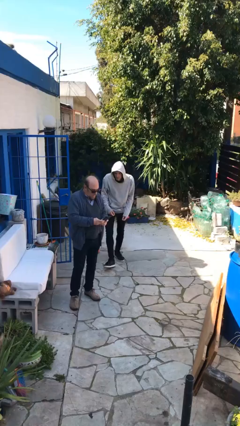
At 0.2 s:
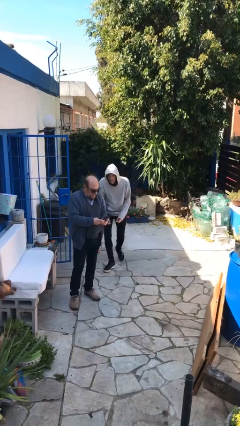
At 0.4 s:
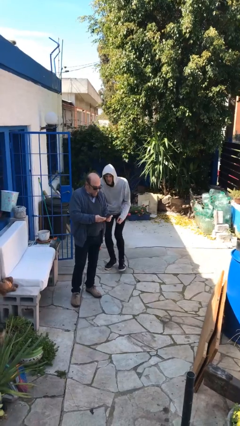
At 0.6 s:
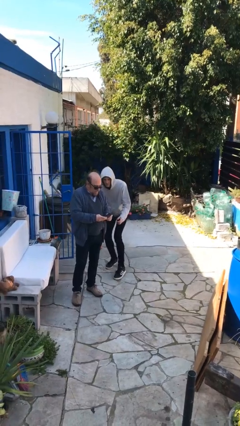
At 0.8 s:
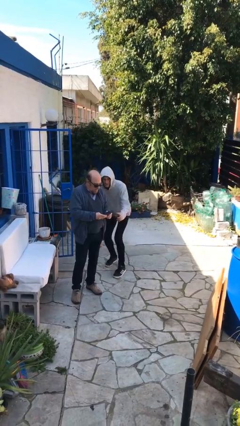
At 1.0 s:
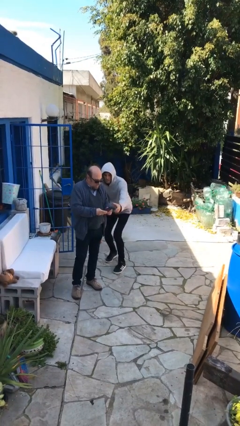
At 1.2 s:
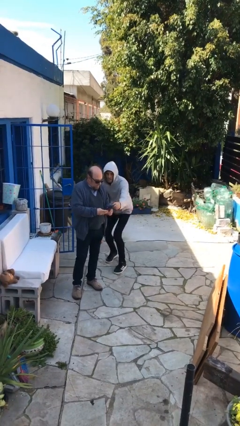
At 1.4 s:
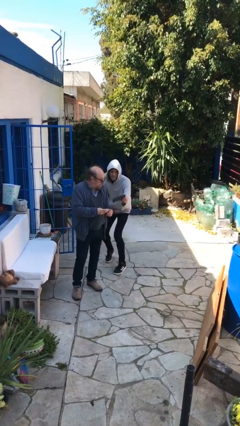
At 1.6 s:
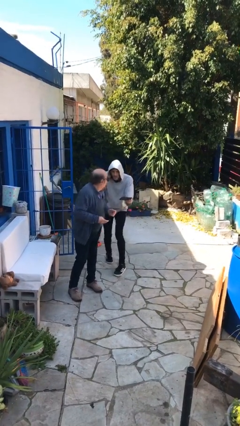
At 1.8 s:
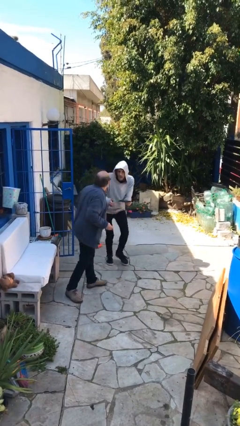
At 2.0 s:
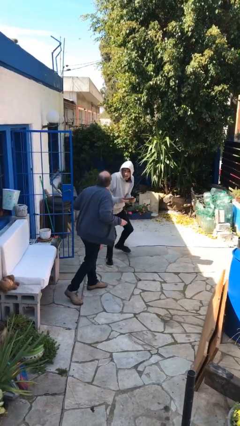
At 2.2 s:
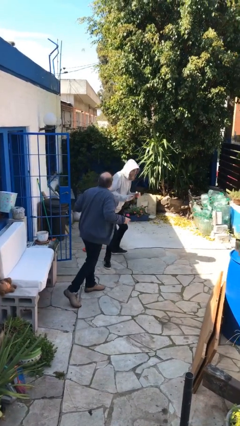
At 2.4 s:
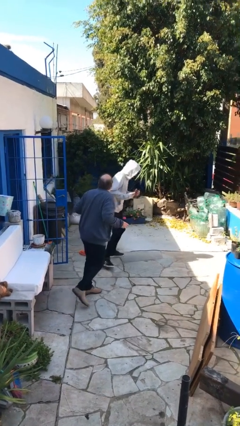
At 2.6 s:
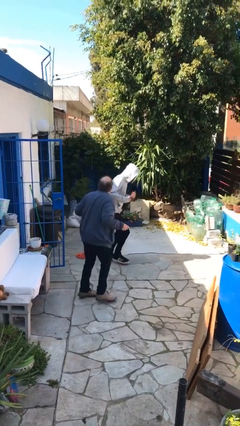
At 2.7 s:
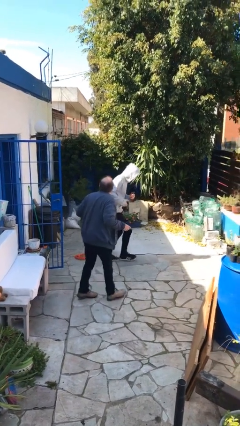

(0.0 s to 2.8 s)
person steals object from person

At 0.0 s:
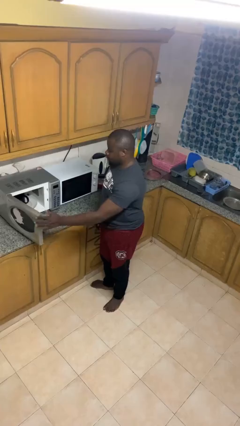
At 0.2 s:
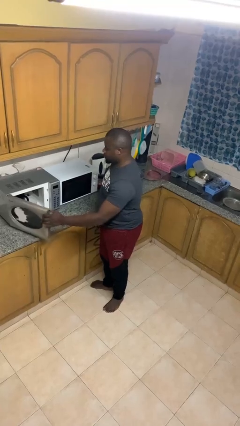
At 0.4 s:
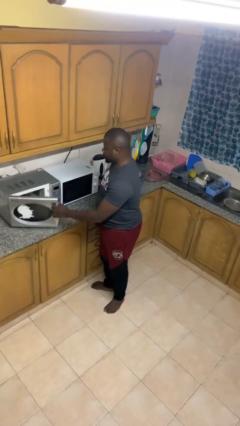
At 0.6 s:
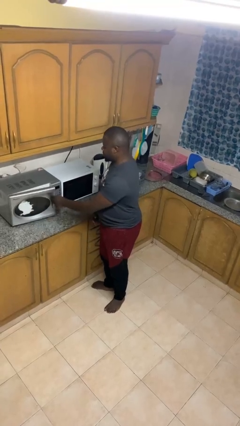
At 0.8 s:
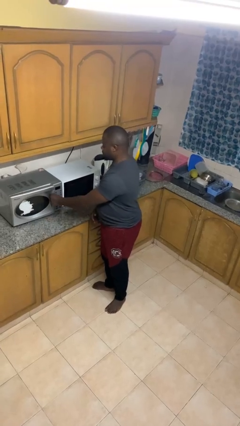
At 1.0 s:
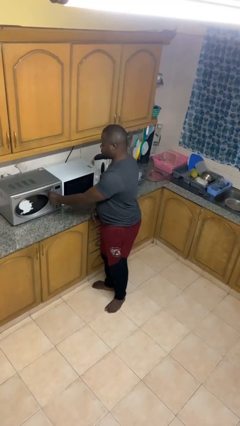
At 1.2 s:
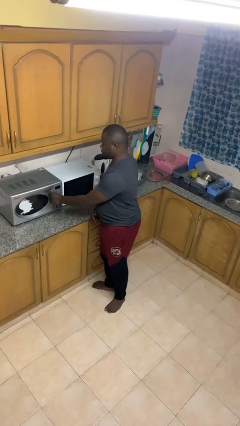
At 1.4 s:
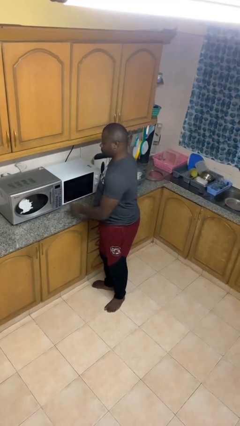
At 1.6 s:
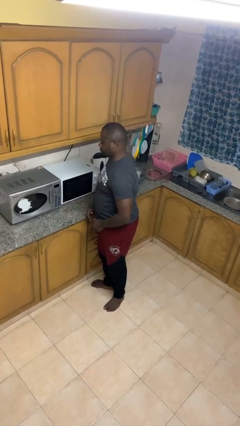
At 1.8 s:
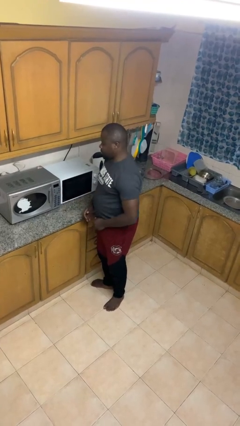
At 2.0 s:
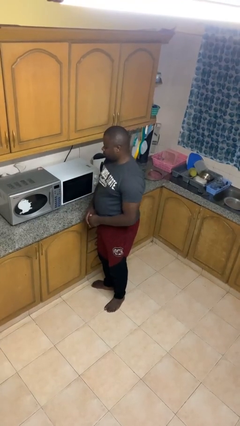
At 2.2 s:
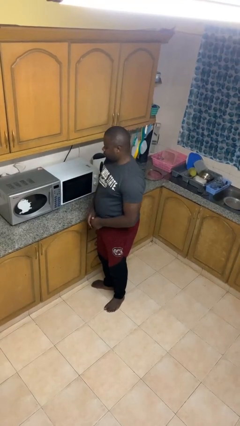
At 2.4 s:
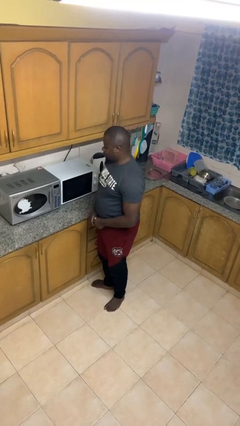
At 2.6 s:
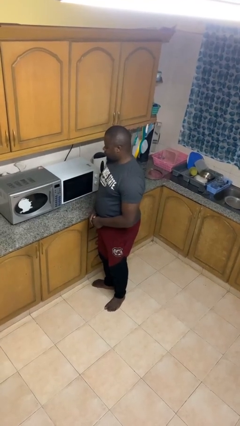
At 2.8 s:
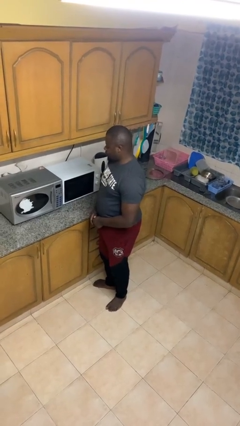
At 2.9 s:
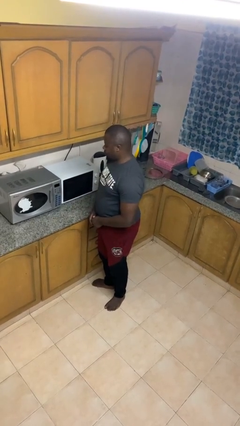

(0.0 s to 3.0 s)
person closes microwave

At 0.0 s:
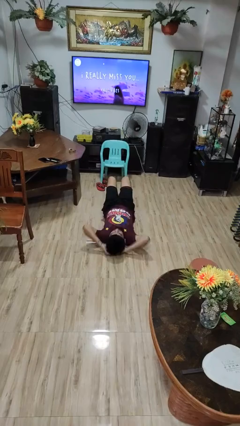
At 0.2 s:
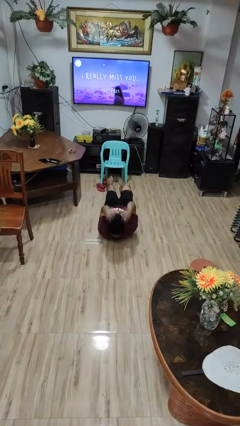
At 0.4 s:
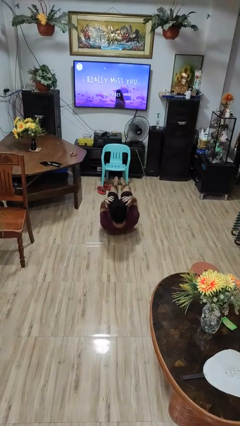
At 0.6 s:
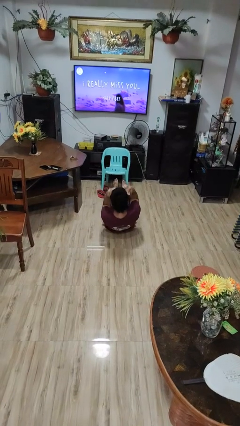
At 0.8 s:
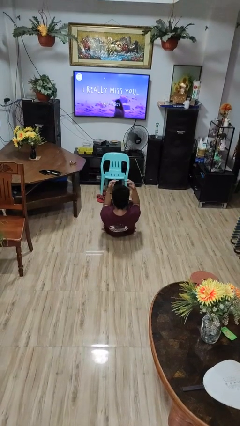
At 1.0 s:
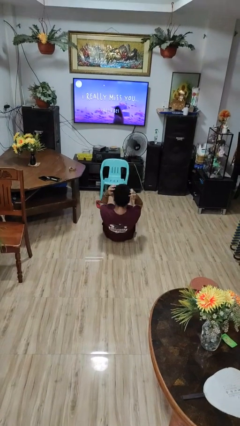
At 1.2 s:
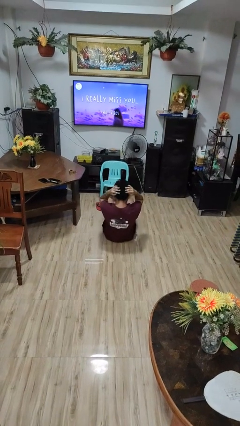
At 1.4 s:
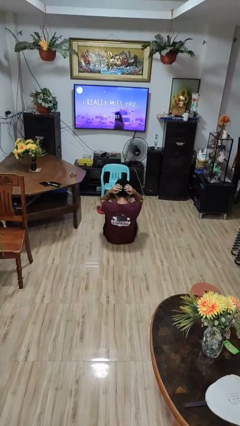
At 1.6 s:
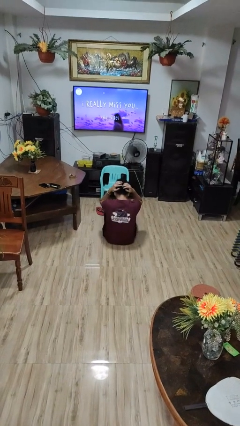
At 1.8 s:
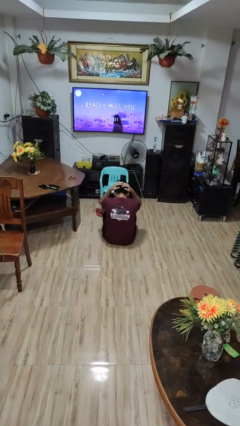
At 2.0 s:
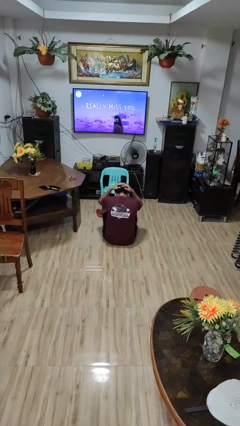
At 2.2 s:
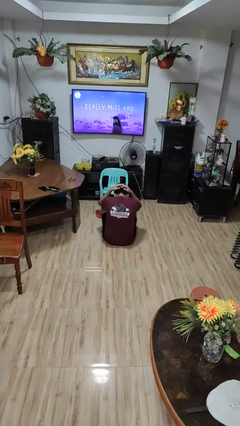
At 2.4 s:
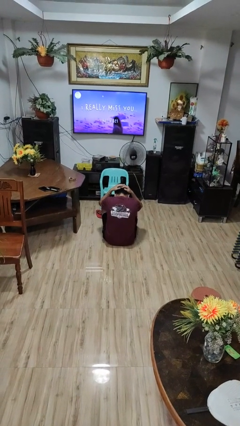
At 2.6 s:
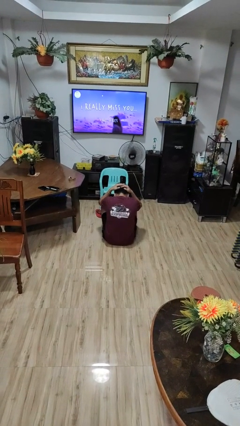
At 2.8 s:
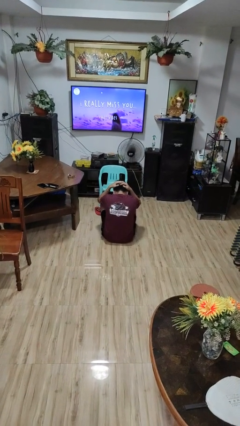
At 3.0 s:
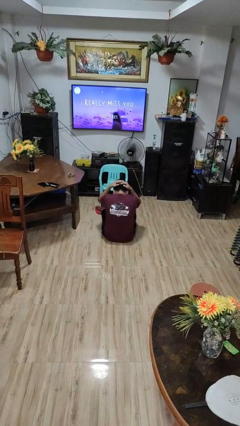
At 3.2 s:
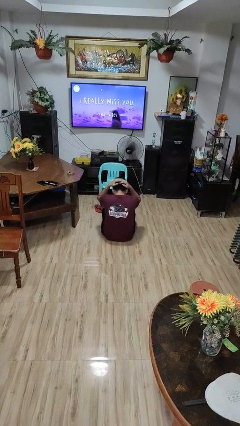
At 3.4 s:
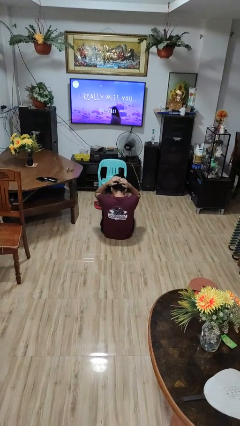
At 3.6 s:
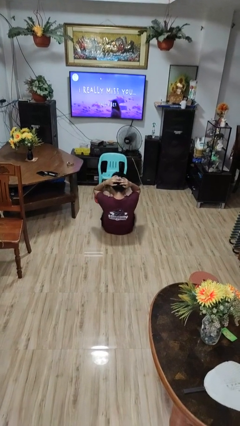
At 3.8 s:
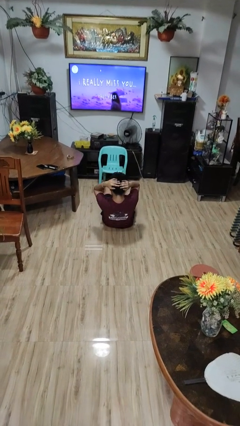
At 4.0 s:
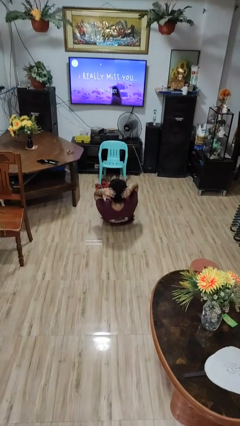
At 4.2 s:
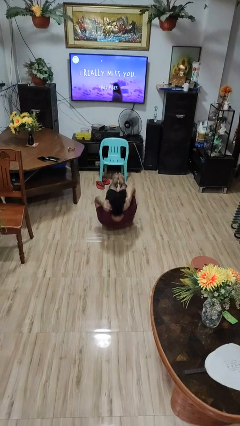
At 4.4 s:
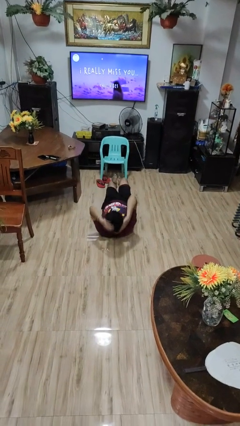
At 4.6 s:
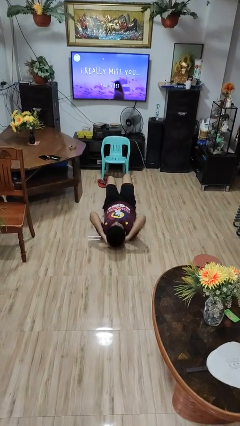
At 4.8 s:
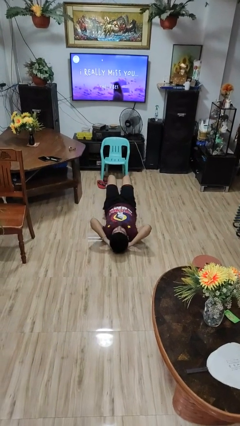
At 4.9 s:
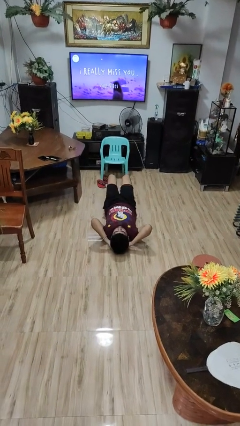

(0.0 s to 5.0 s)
person exercises with situp

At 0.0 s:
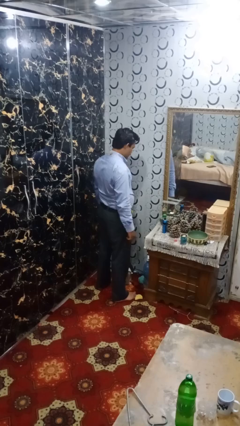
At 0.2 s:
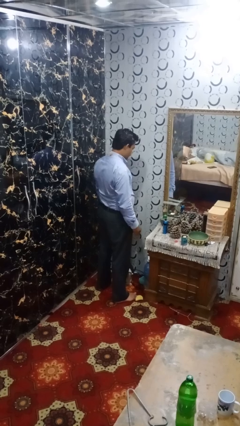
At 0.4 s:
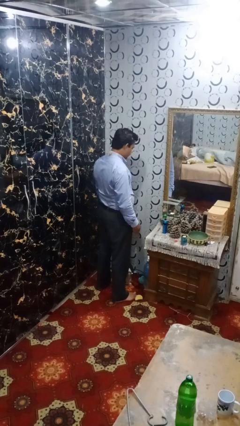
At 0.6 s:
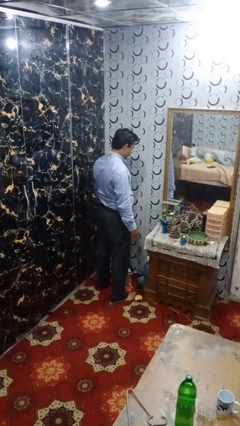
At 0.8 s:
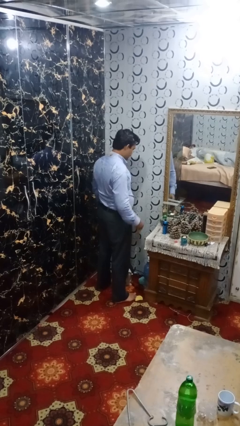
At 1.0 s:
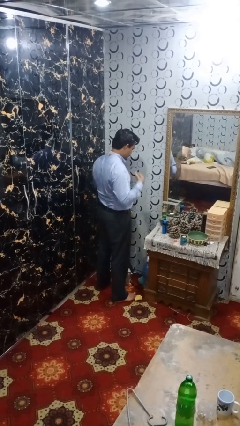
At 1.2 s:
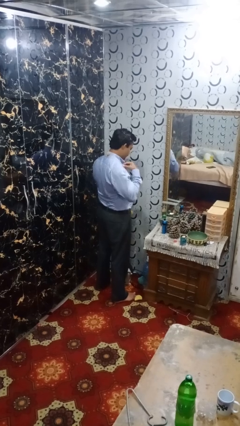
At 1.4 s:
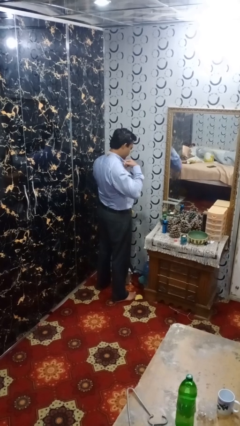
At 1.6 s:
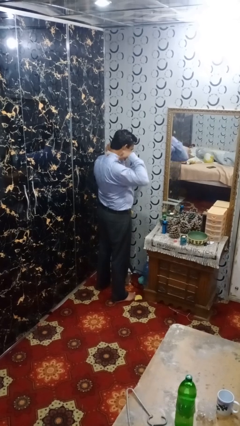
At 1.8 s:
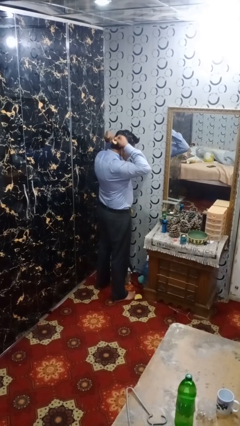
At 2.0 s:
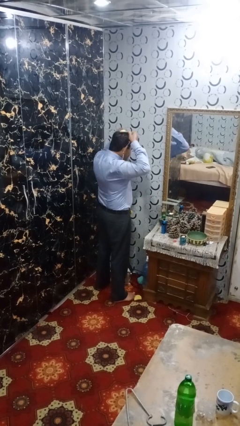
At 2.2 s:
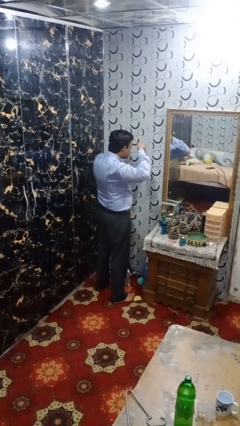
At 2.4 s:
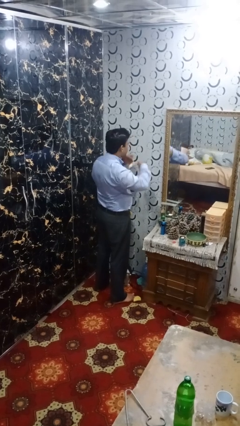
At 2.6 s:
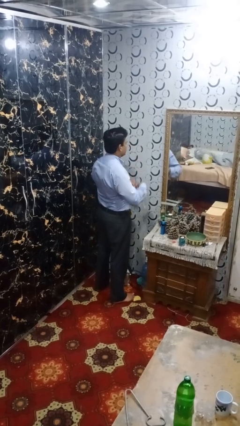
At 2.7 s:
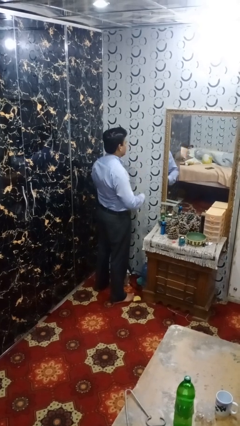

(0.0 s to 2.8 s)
person takes off necklace

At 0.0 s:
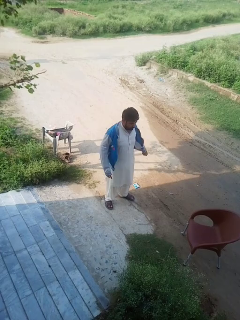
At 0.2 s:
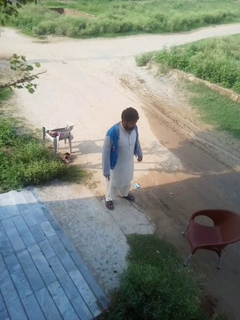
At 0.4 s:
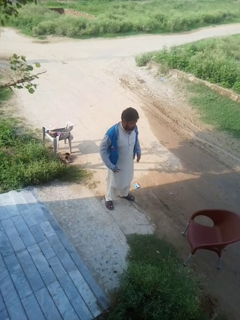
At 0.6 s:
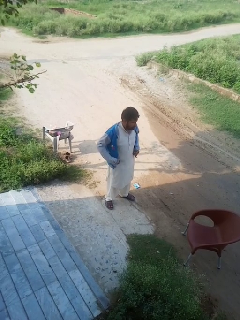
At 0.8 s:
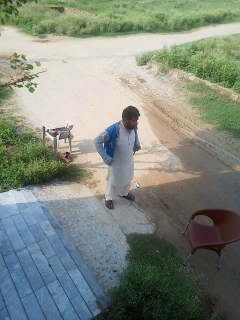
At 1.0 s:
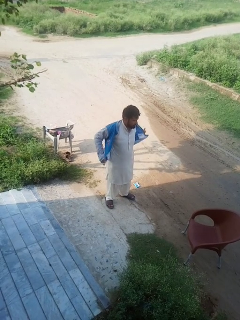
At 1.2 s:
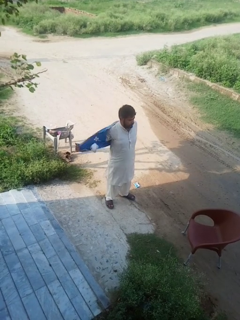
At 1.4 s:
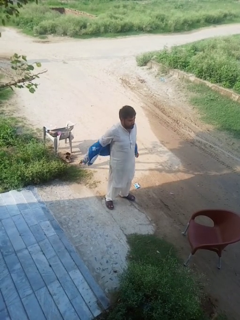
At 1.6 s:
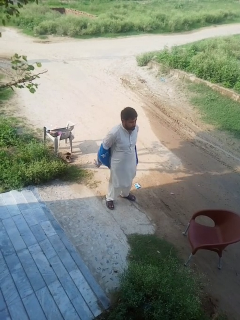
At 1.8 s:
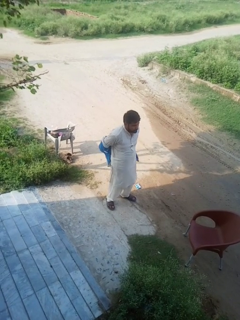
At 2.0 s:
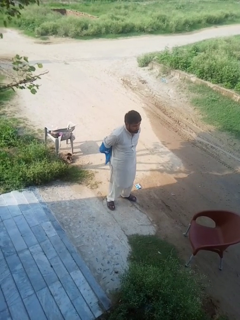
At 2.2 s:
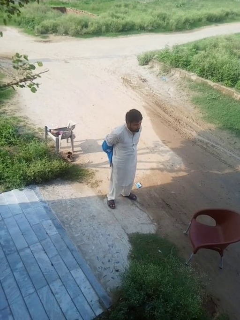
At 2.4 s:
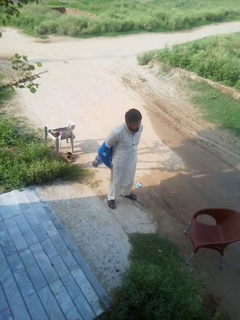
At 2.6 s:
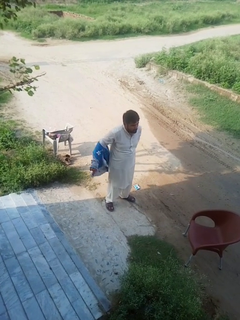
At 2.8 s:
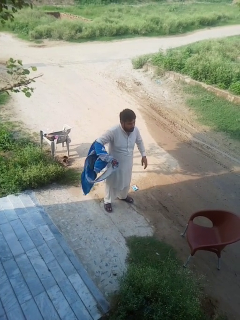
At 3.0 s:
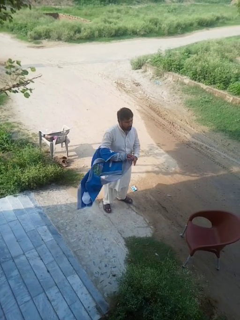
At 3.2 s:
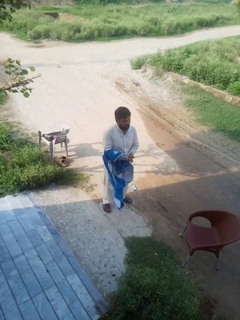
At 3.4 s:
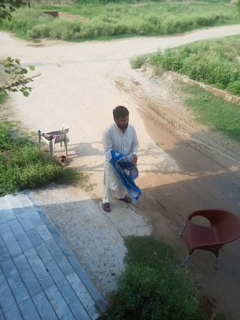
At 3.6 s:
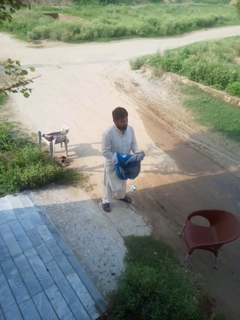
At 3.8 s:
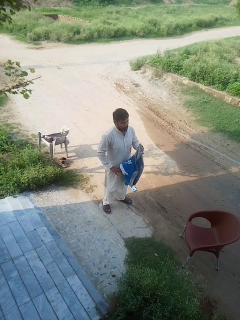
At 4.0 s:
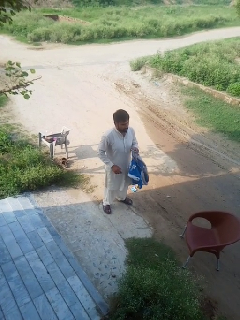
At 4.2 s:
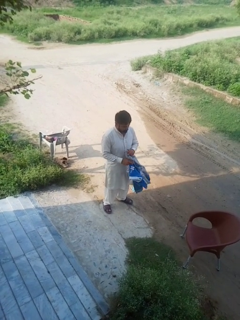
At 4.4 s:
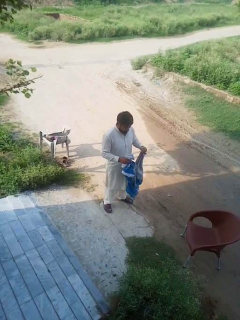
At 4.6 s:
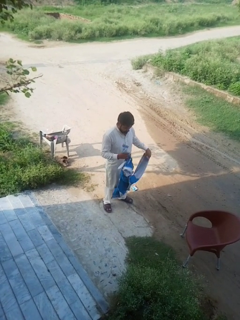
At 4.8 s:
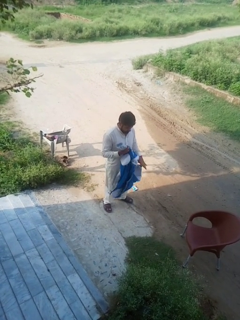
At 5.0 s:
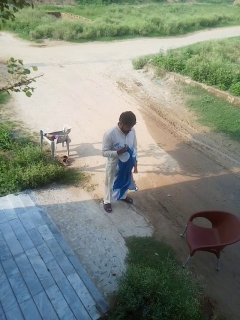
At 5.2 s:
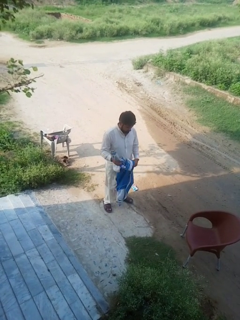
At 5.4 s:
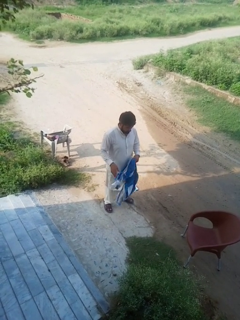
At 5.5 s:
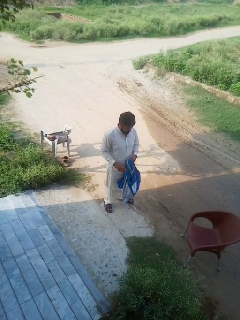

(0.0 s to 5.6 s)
person takes off jacket
